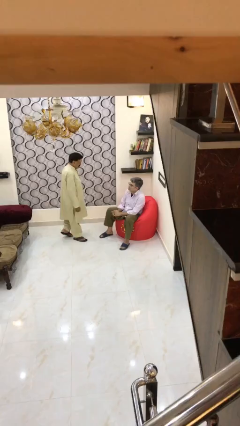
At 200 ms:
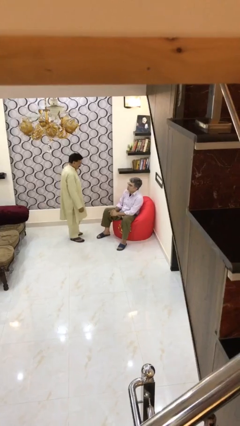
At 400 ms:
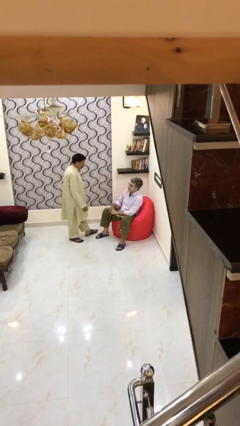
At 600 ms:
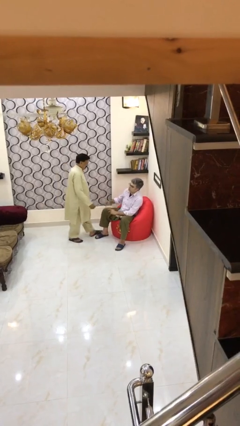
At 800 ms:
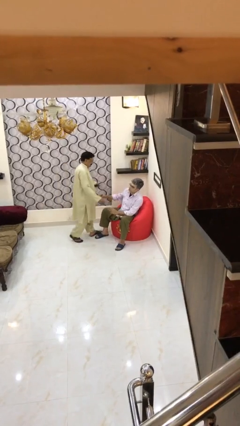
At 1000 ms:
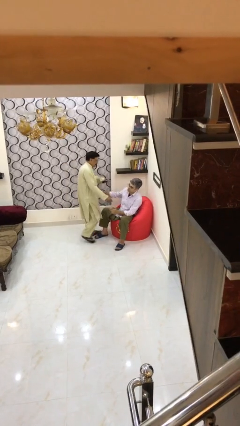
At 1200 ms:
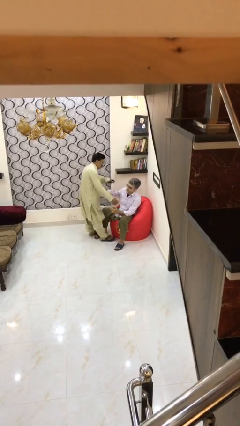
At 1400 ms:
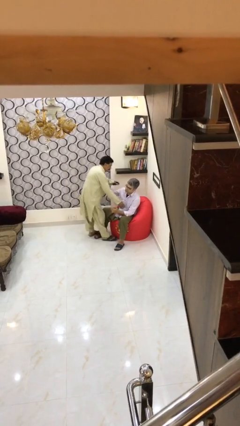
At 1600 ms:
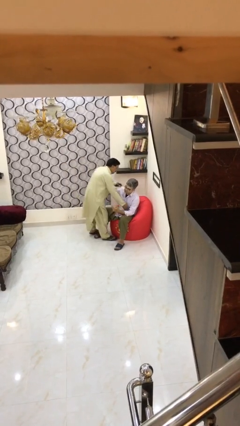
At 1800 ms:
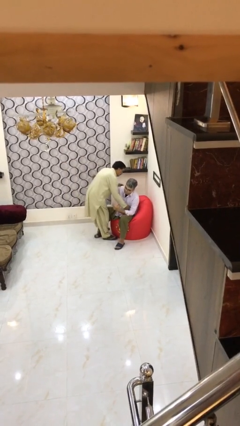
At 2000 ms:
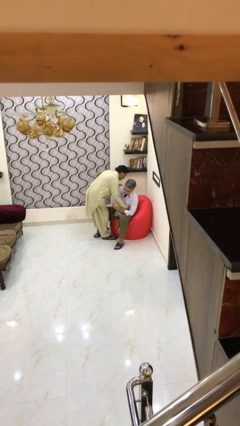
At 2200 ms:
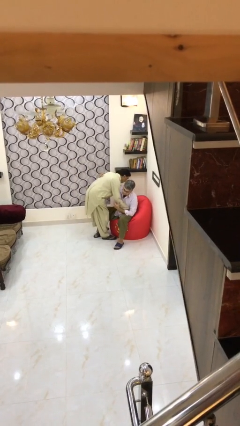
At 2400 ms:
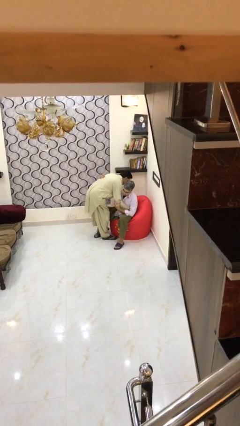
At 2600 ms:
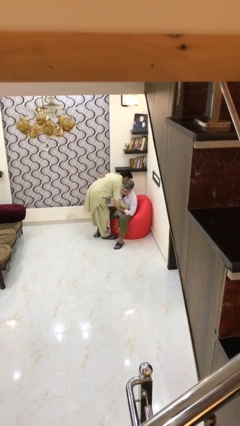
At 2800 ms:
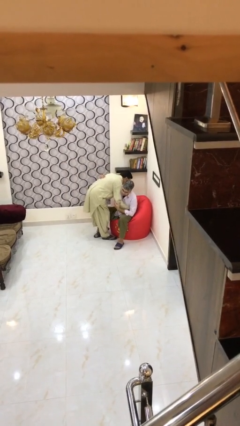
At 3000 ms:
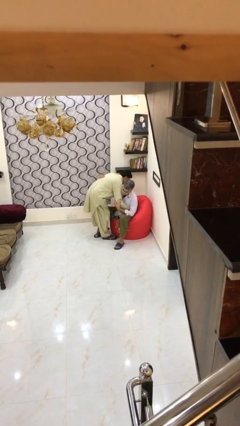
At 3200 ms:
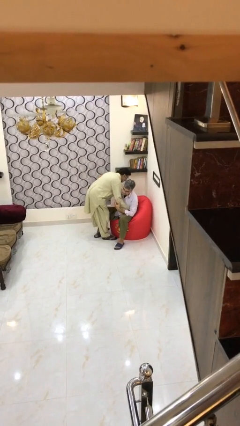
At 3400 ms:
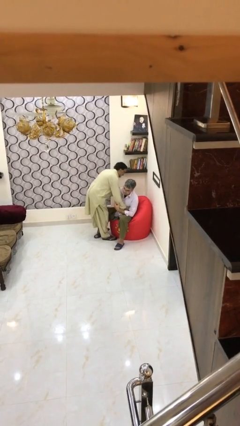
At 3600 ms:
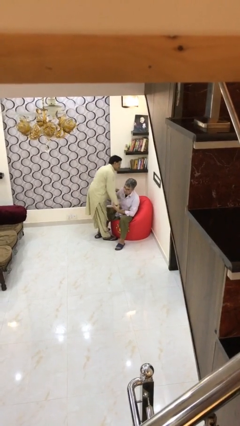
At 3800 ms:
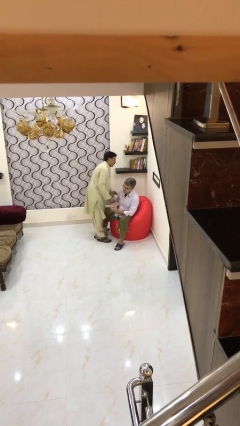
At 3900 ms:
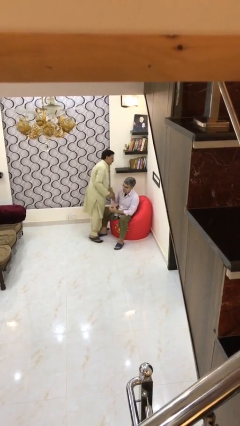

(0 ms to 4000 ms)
person embraces person

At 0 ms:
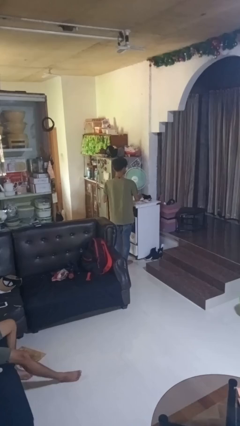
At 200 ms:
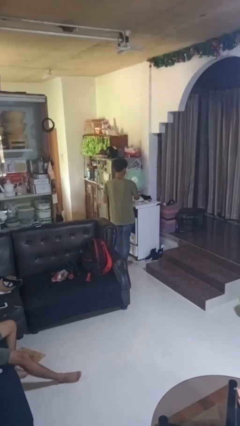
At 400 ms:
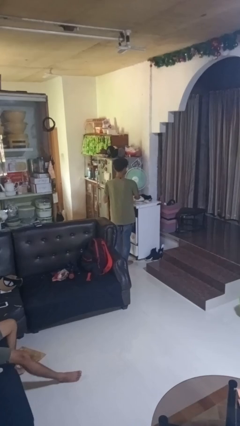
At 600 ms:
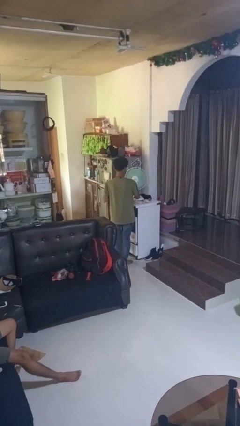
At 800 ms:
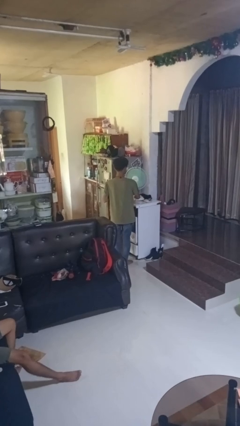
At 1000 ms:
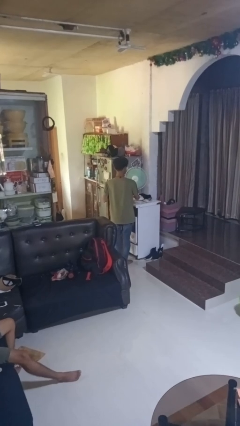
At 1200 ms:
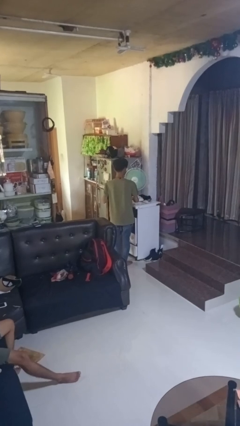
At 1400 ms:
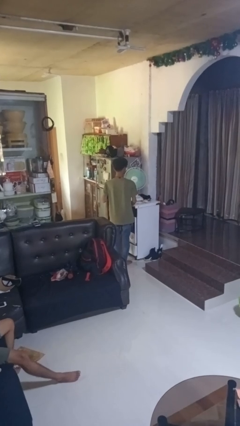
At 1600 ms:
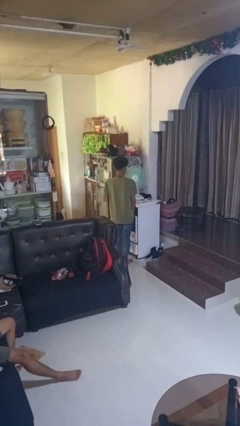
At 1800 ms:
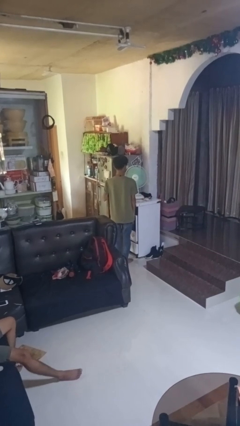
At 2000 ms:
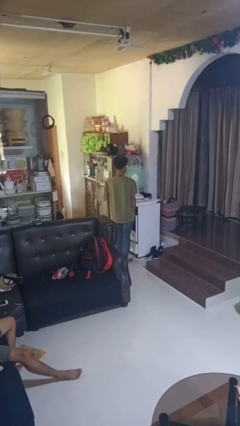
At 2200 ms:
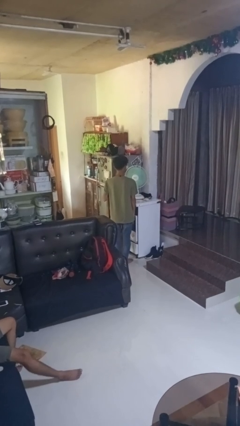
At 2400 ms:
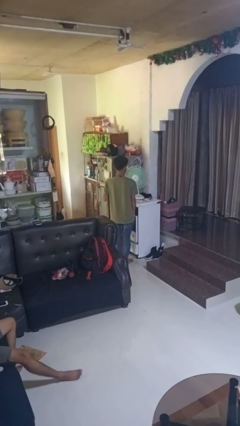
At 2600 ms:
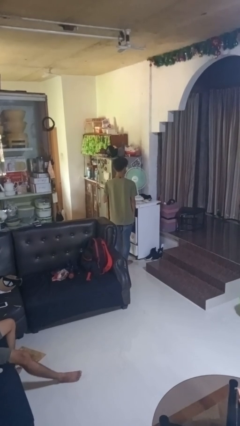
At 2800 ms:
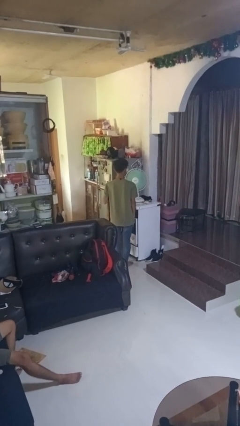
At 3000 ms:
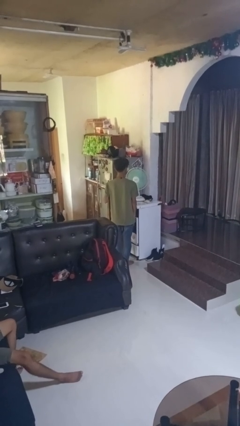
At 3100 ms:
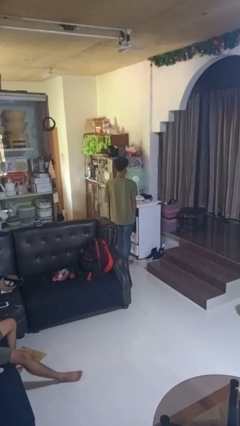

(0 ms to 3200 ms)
person turns off fan

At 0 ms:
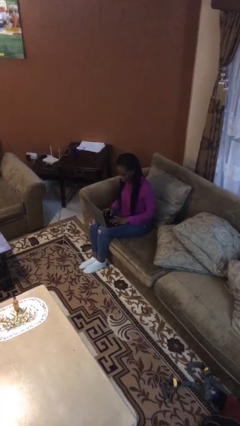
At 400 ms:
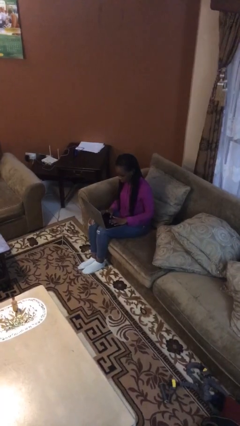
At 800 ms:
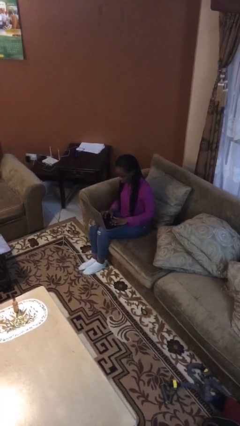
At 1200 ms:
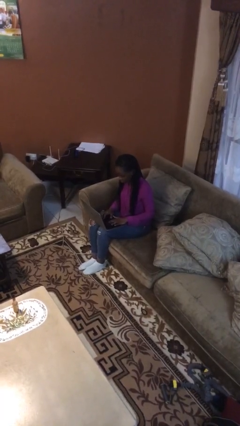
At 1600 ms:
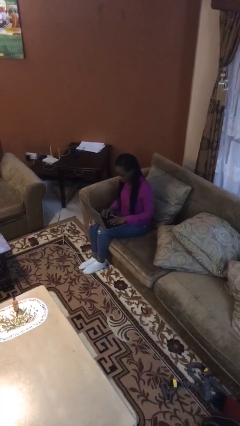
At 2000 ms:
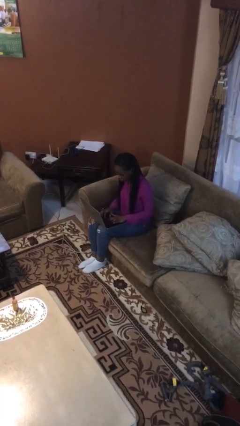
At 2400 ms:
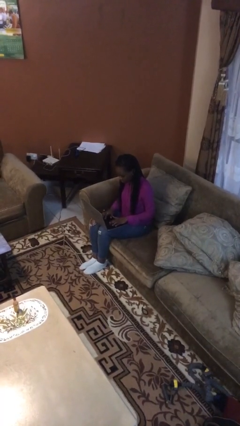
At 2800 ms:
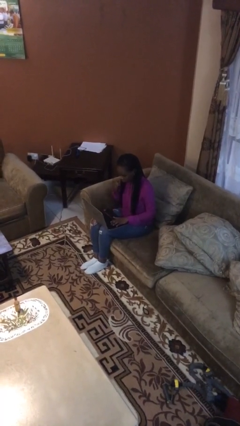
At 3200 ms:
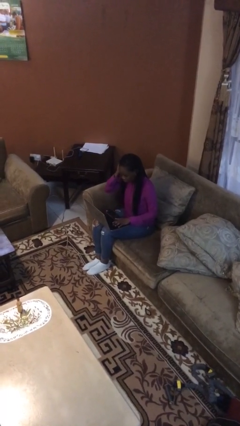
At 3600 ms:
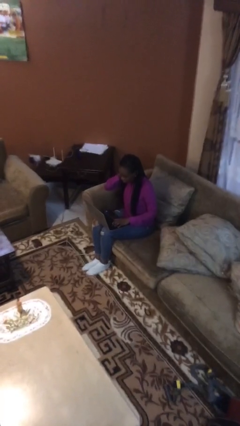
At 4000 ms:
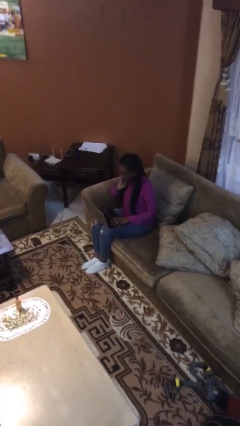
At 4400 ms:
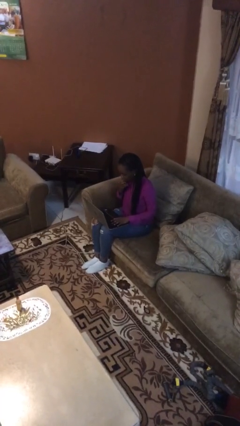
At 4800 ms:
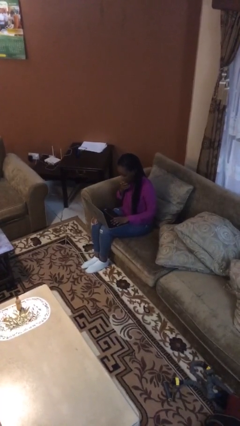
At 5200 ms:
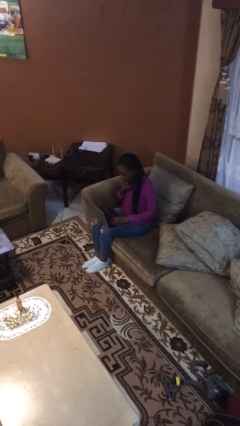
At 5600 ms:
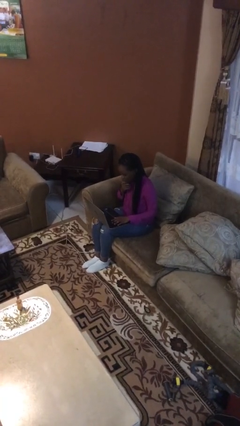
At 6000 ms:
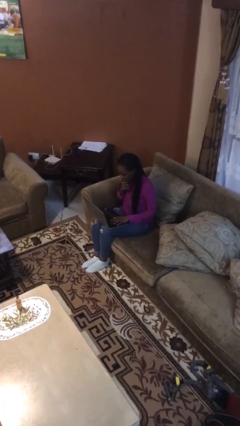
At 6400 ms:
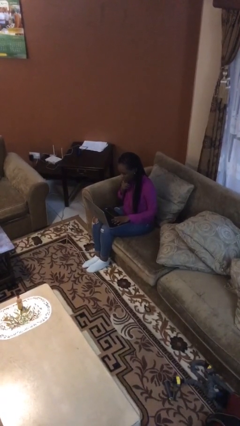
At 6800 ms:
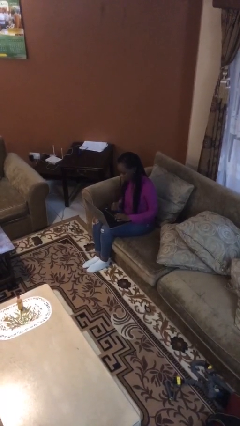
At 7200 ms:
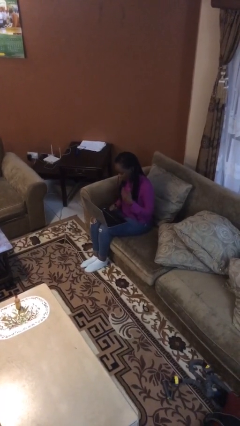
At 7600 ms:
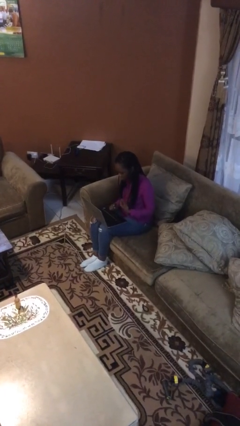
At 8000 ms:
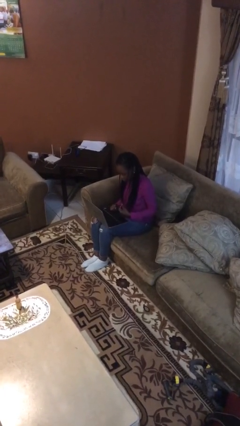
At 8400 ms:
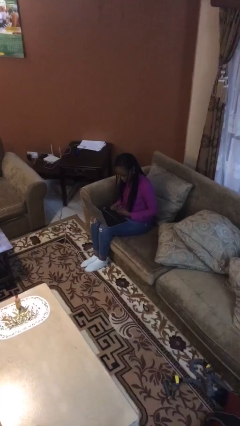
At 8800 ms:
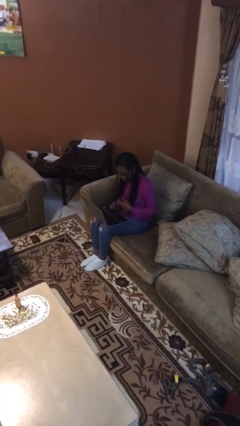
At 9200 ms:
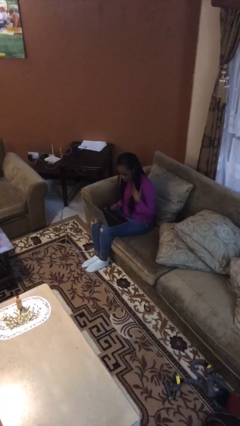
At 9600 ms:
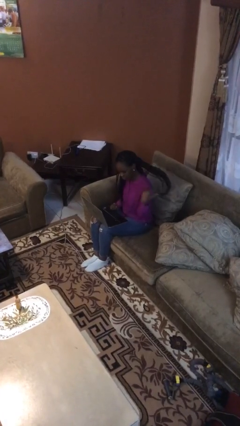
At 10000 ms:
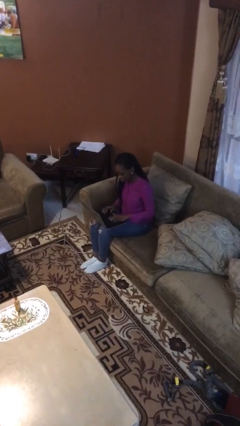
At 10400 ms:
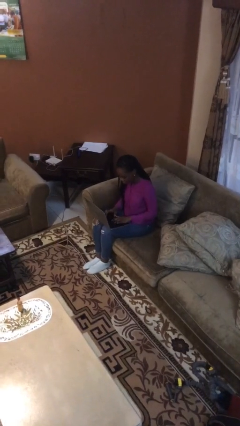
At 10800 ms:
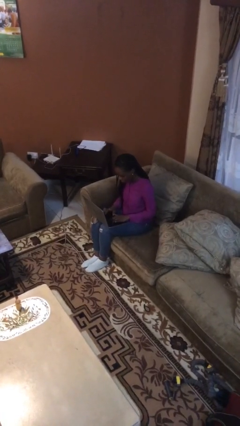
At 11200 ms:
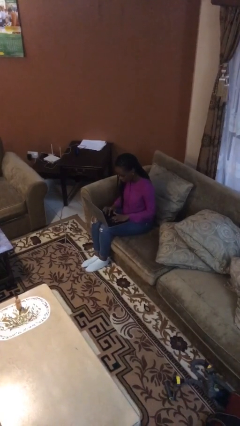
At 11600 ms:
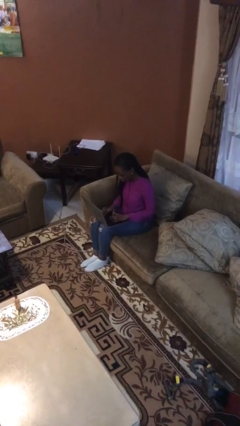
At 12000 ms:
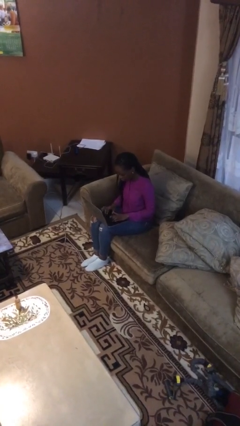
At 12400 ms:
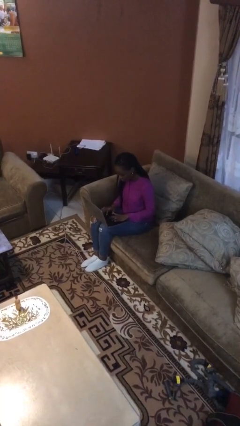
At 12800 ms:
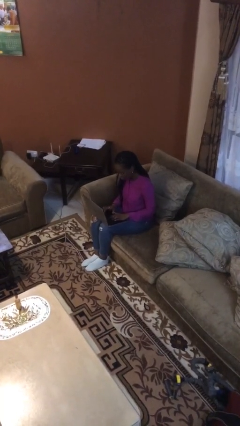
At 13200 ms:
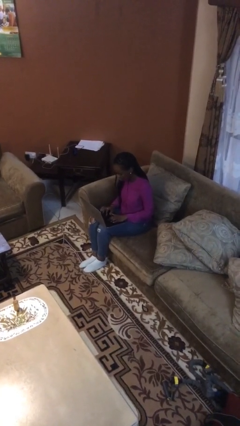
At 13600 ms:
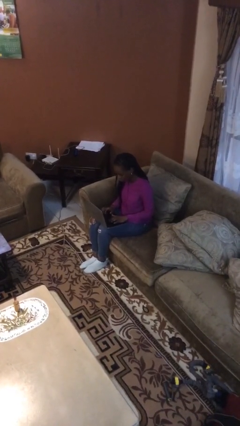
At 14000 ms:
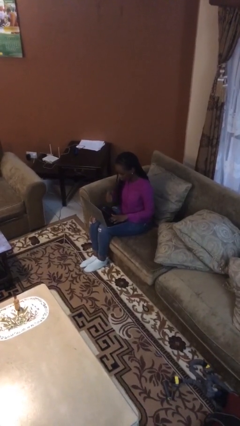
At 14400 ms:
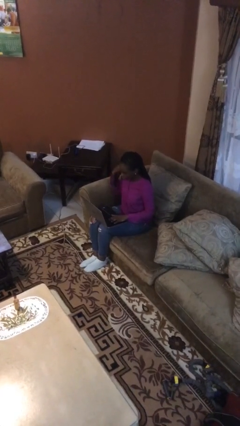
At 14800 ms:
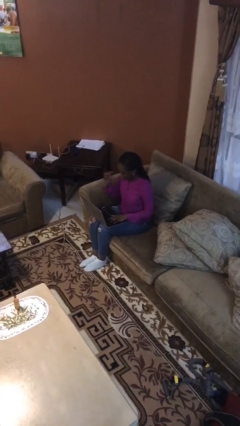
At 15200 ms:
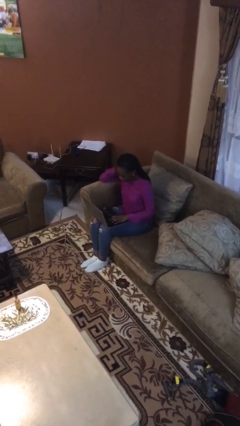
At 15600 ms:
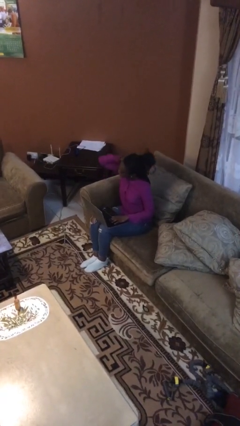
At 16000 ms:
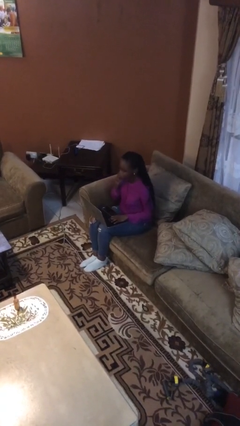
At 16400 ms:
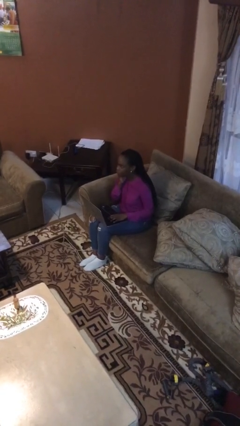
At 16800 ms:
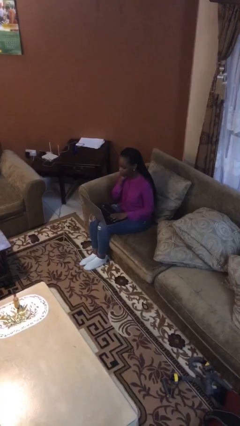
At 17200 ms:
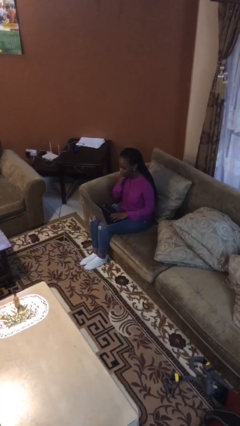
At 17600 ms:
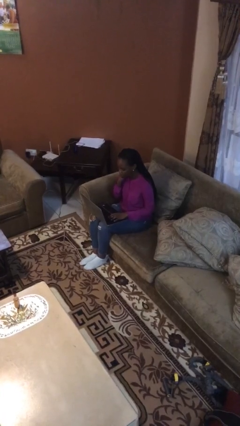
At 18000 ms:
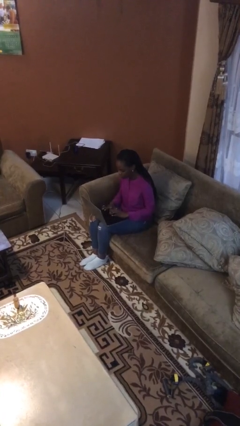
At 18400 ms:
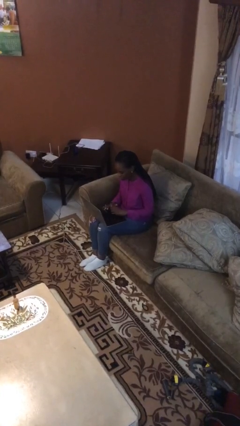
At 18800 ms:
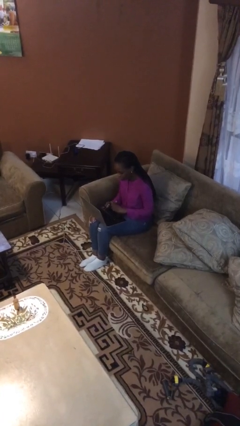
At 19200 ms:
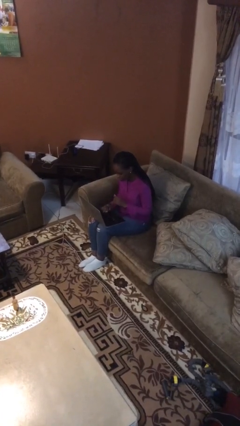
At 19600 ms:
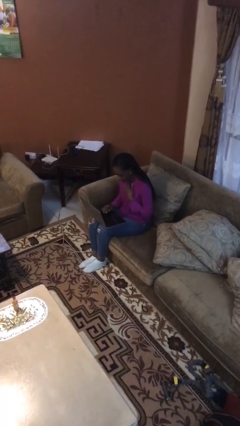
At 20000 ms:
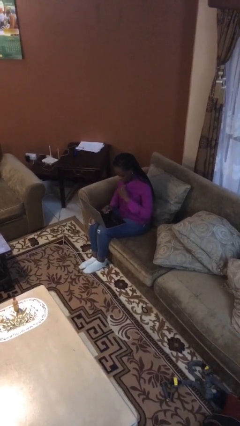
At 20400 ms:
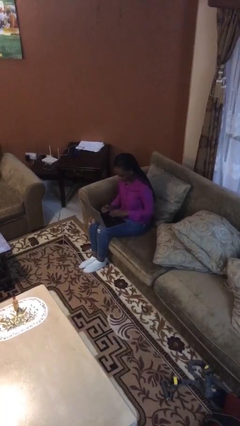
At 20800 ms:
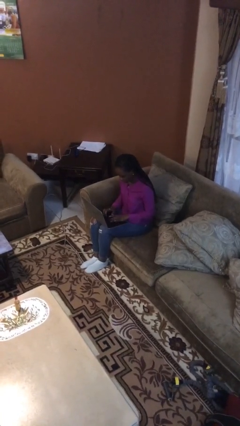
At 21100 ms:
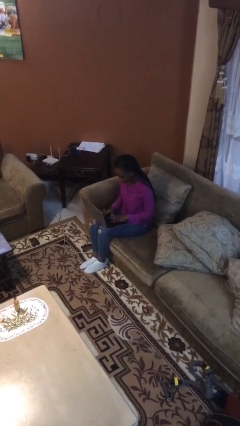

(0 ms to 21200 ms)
person interacts with laptop
